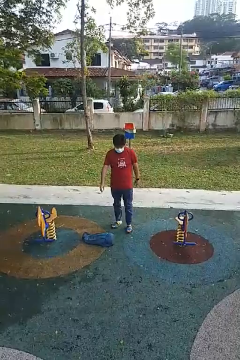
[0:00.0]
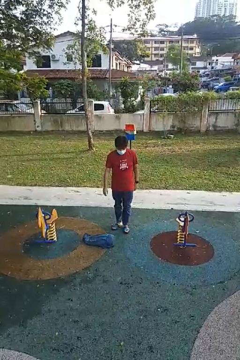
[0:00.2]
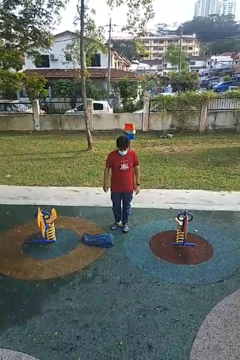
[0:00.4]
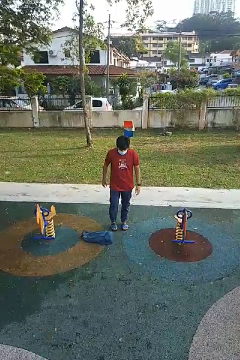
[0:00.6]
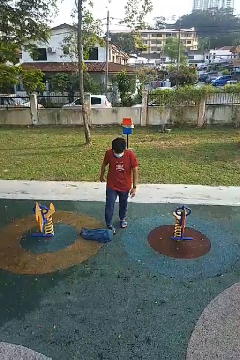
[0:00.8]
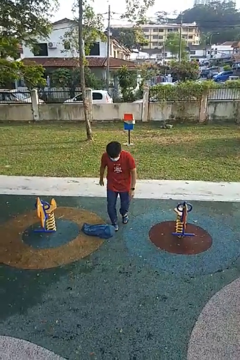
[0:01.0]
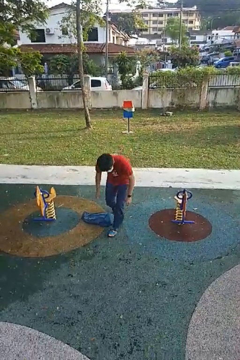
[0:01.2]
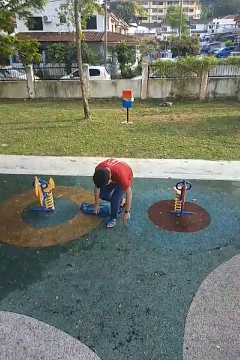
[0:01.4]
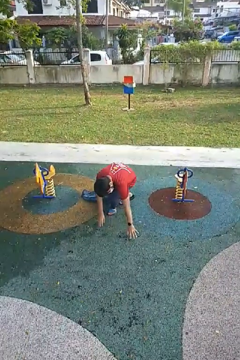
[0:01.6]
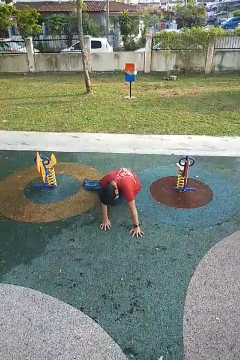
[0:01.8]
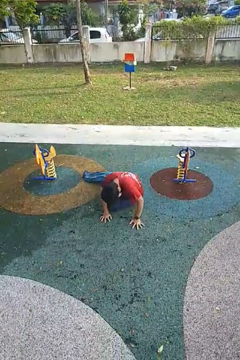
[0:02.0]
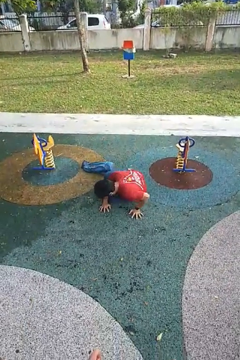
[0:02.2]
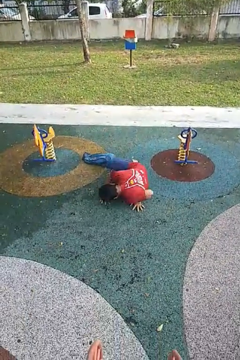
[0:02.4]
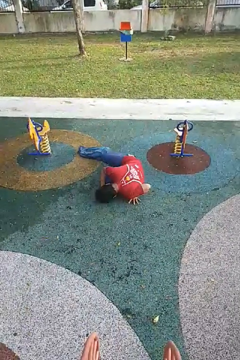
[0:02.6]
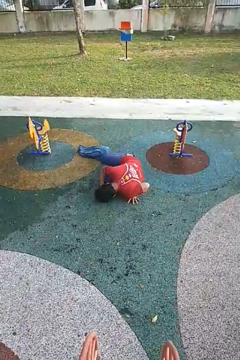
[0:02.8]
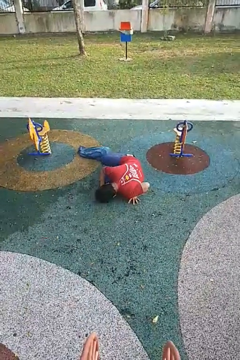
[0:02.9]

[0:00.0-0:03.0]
person trips on object on floor

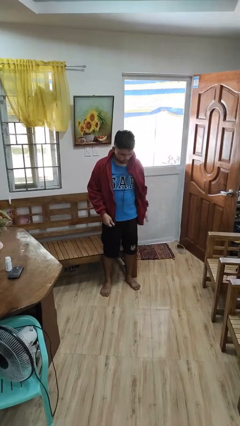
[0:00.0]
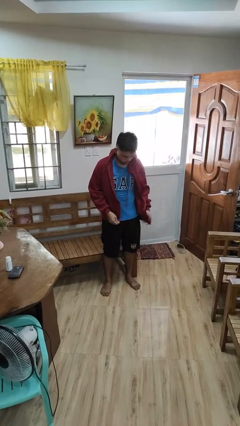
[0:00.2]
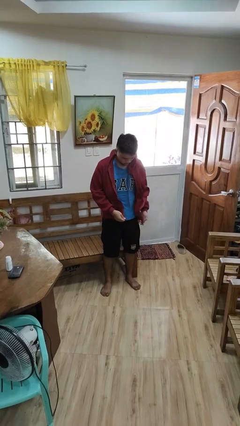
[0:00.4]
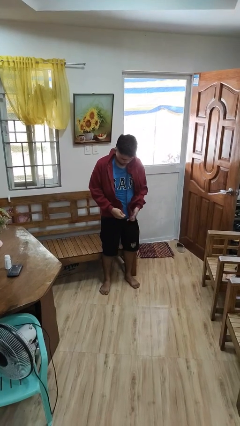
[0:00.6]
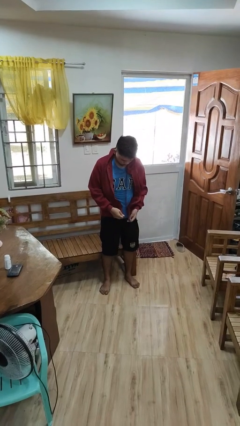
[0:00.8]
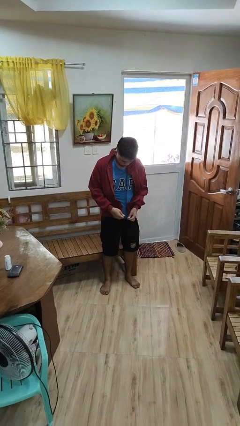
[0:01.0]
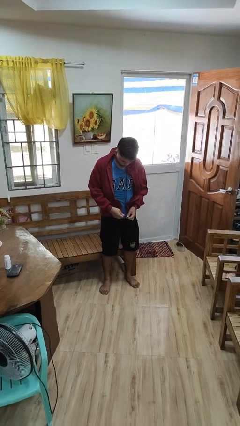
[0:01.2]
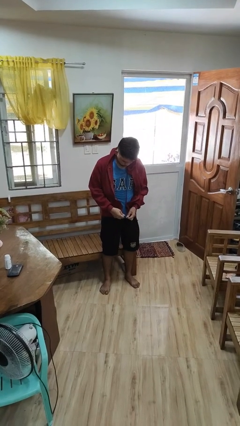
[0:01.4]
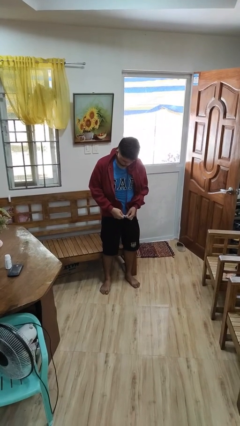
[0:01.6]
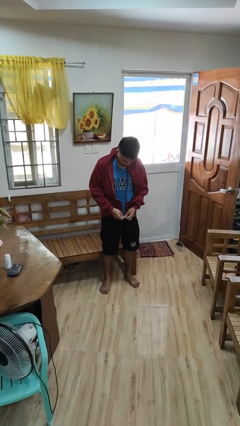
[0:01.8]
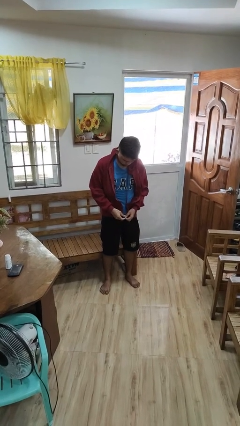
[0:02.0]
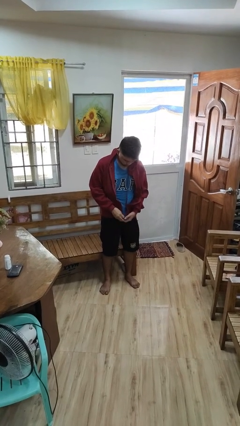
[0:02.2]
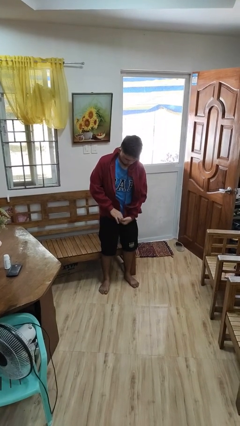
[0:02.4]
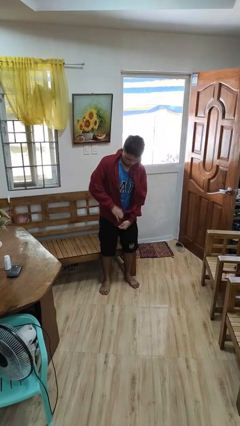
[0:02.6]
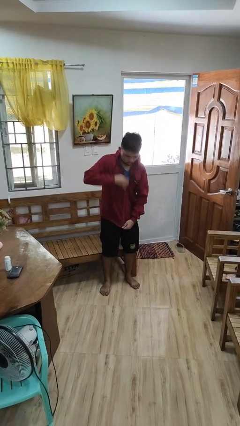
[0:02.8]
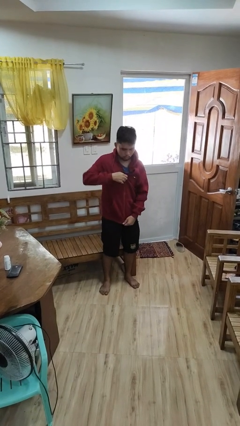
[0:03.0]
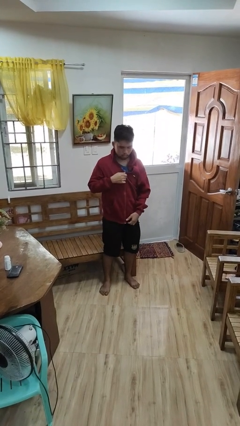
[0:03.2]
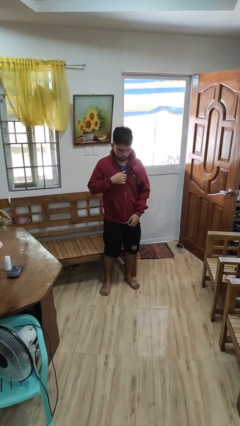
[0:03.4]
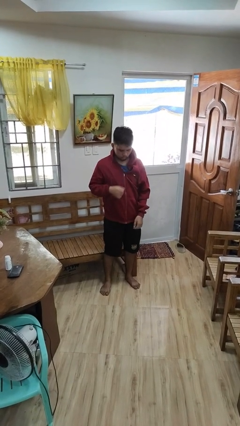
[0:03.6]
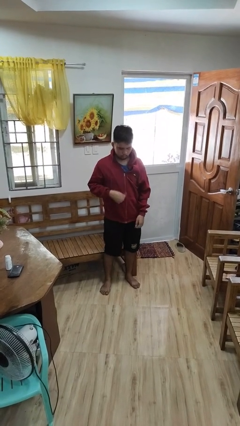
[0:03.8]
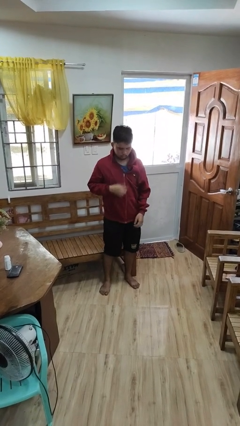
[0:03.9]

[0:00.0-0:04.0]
person zips up jacket

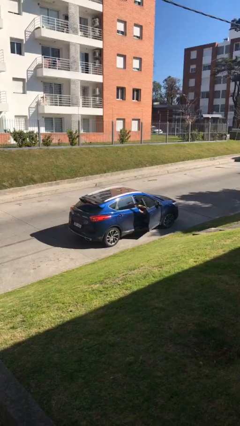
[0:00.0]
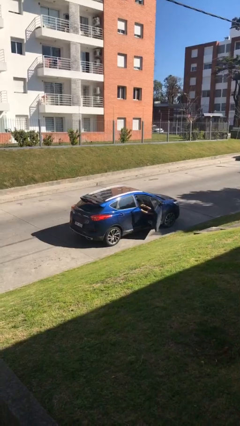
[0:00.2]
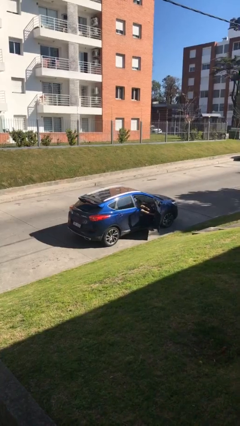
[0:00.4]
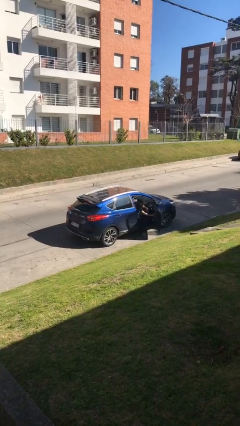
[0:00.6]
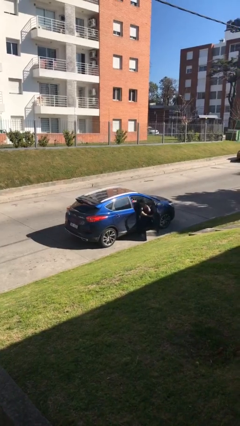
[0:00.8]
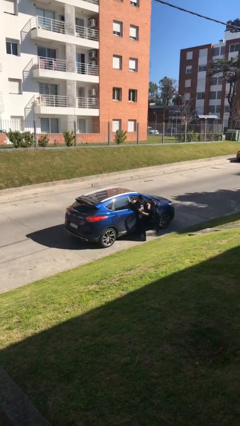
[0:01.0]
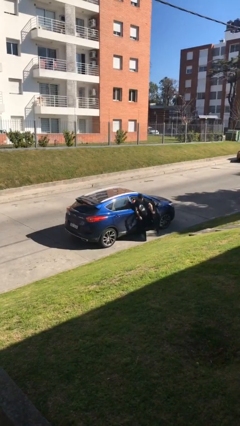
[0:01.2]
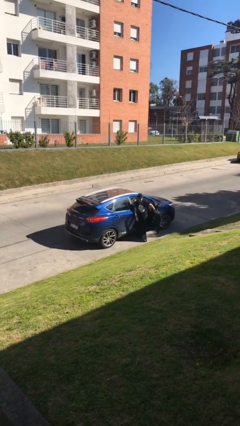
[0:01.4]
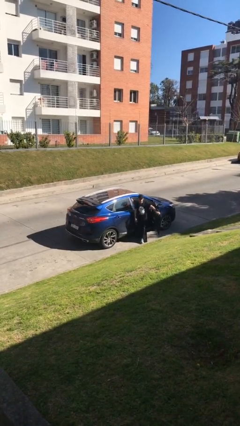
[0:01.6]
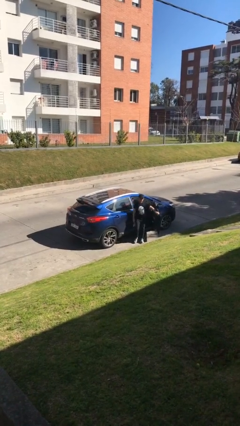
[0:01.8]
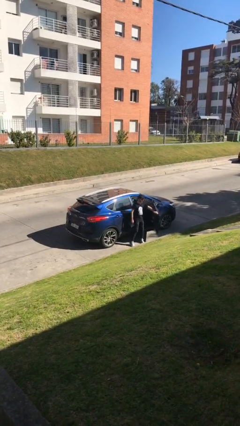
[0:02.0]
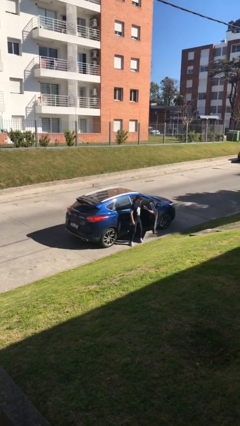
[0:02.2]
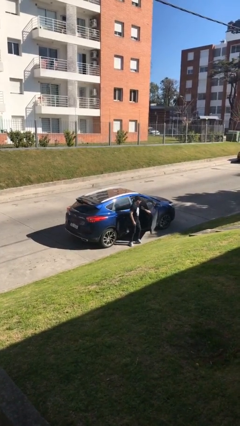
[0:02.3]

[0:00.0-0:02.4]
car drops off person

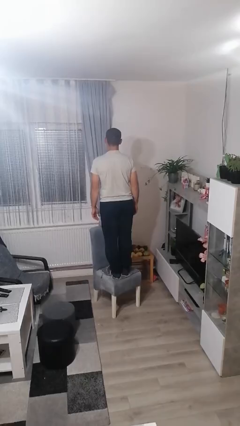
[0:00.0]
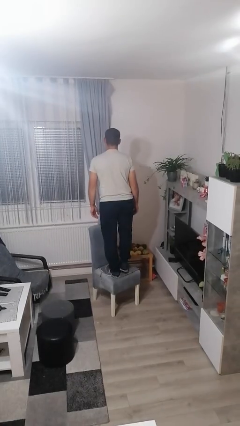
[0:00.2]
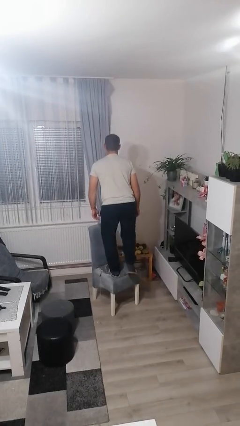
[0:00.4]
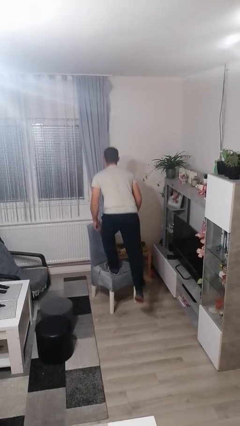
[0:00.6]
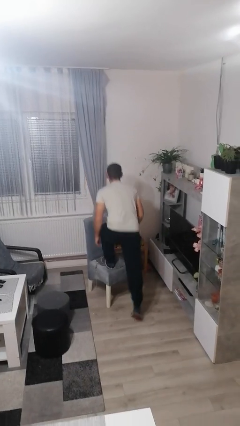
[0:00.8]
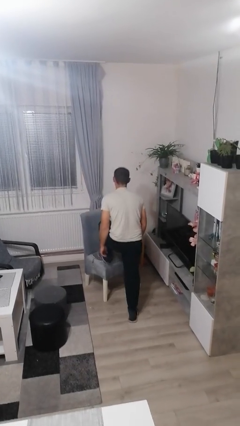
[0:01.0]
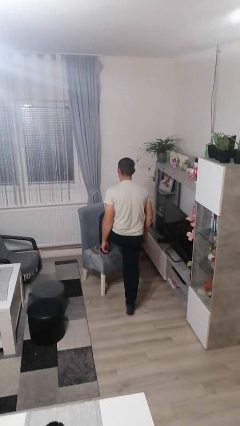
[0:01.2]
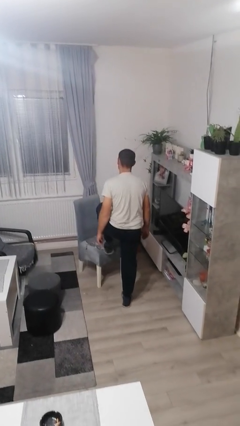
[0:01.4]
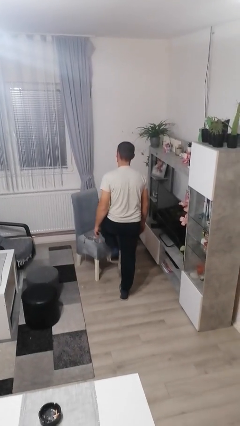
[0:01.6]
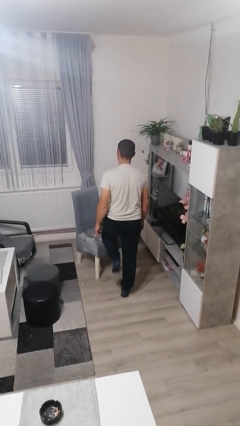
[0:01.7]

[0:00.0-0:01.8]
person climbs off chair

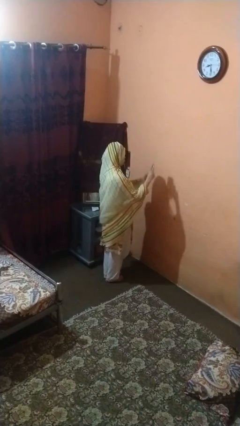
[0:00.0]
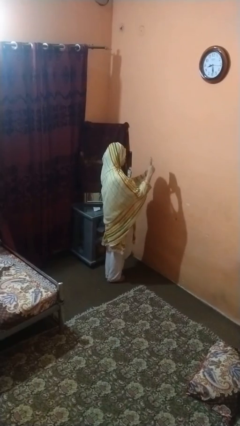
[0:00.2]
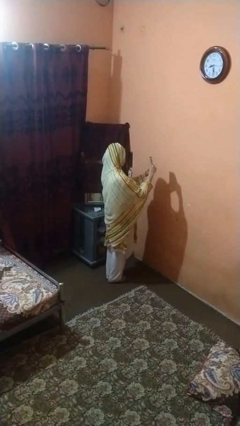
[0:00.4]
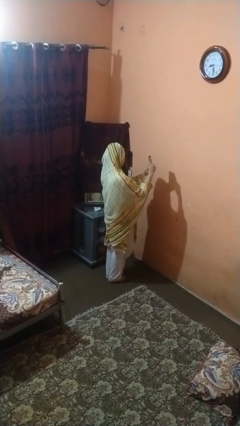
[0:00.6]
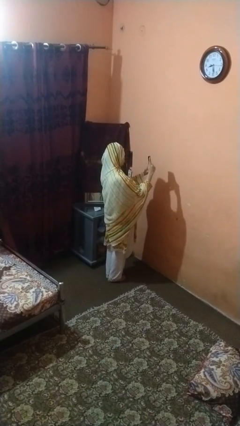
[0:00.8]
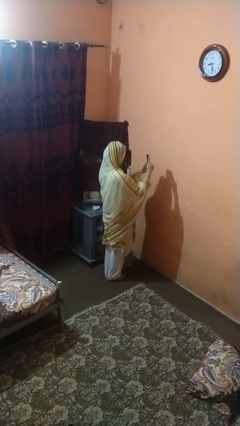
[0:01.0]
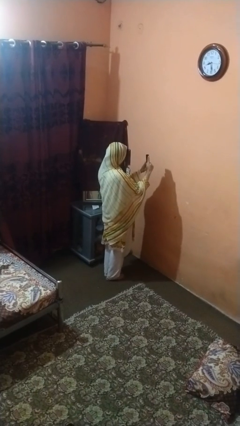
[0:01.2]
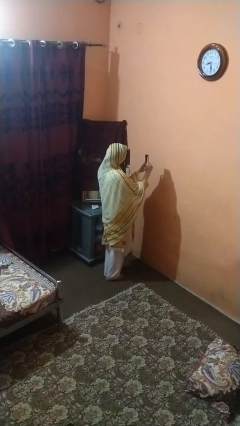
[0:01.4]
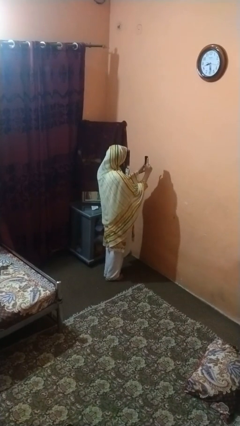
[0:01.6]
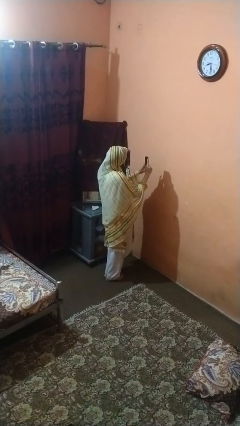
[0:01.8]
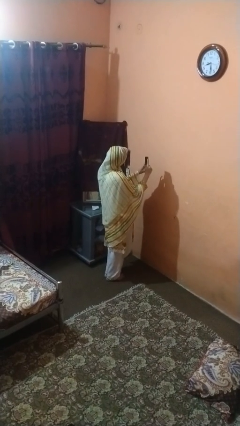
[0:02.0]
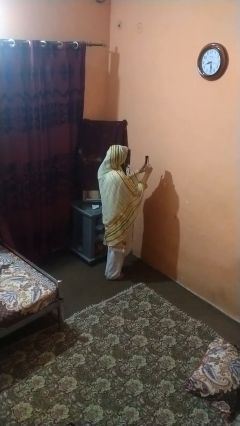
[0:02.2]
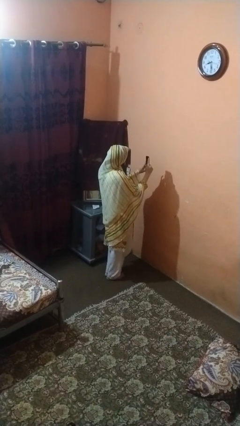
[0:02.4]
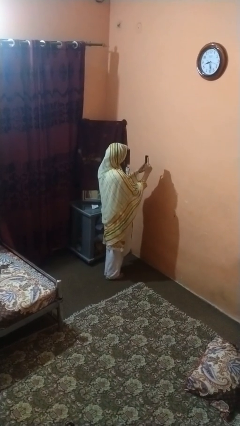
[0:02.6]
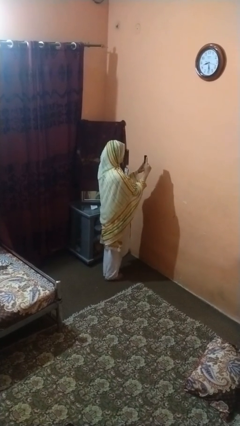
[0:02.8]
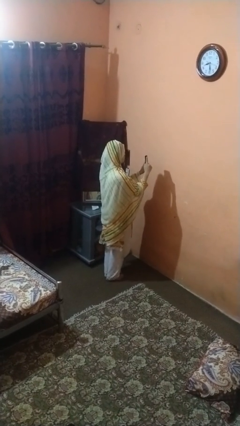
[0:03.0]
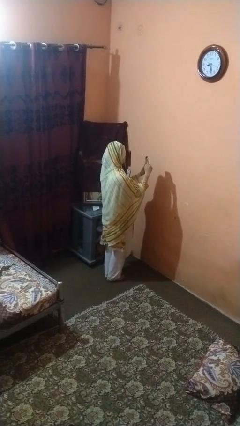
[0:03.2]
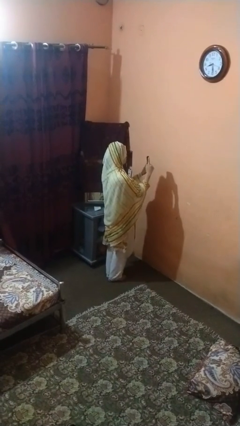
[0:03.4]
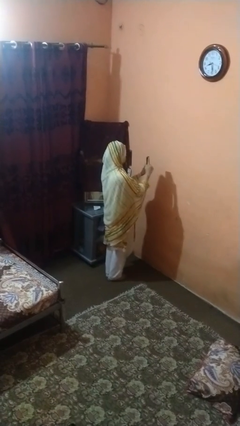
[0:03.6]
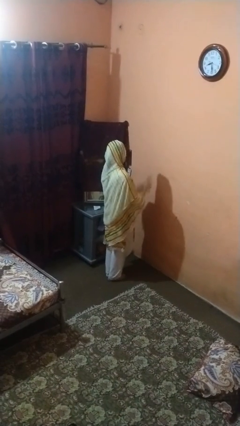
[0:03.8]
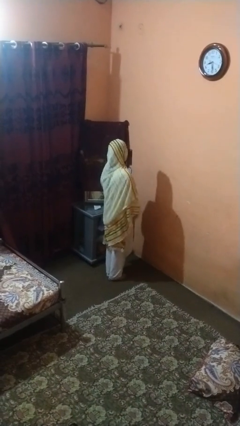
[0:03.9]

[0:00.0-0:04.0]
person takes selfie

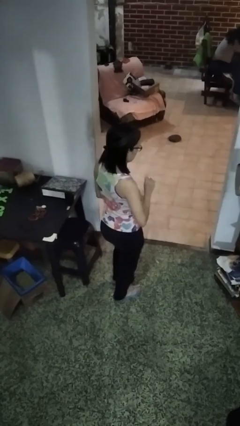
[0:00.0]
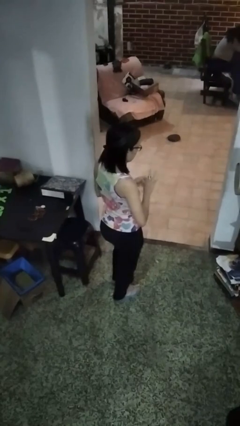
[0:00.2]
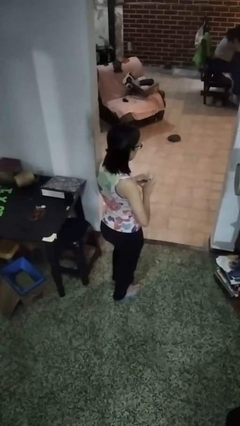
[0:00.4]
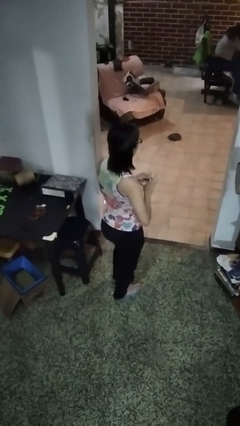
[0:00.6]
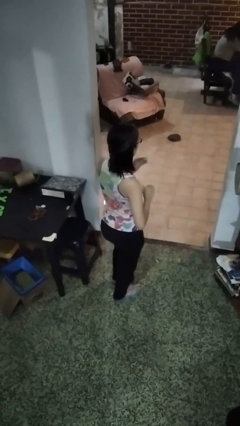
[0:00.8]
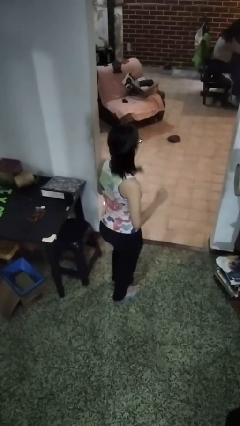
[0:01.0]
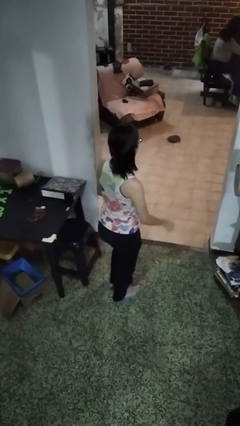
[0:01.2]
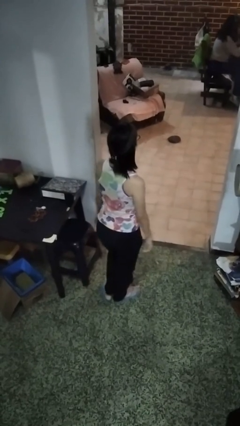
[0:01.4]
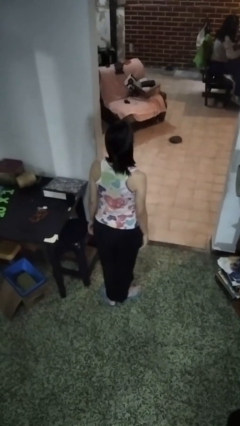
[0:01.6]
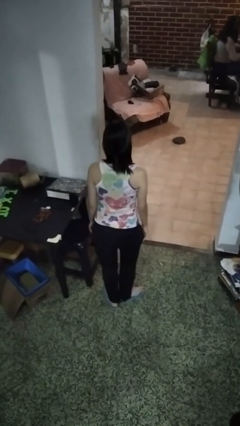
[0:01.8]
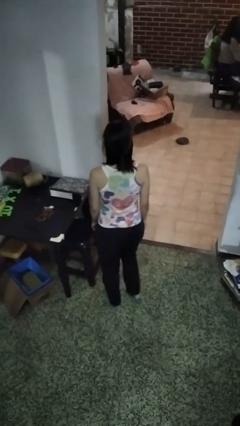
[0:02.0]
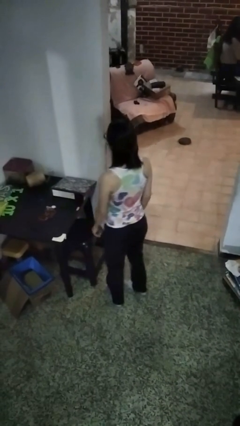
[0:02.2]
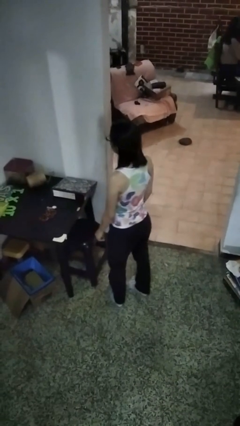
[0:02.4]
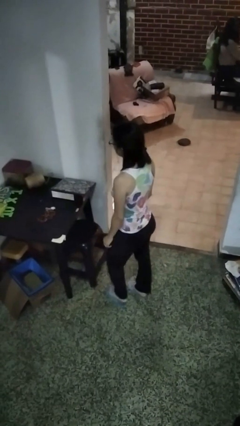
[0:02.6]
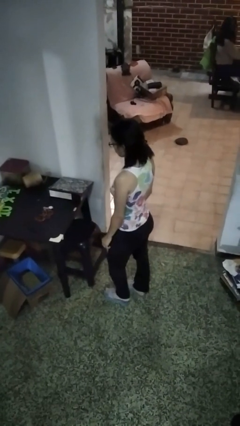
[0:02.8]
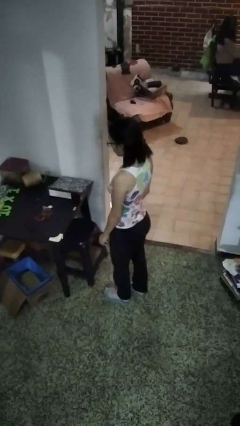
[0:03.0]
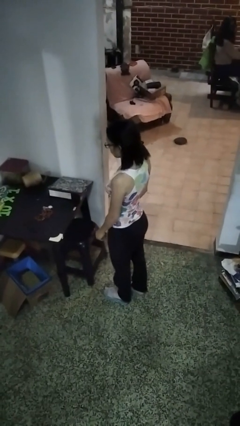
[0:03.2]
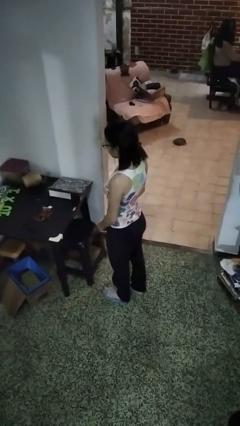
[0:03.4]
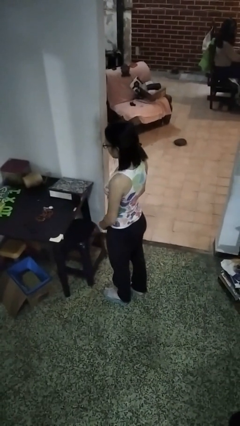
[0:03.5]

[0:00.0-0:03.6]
person takes off ring
